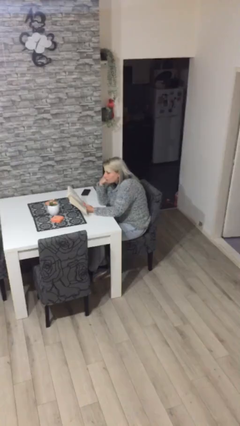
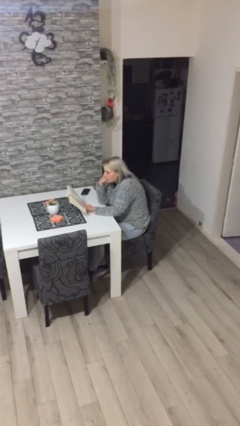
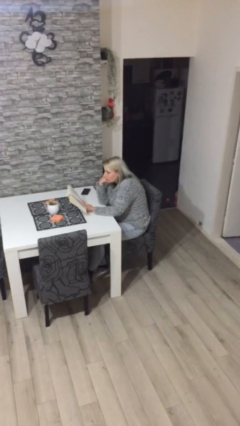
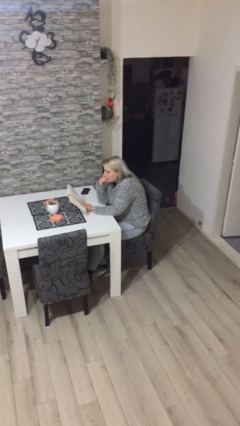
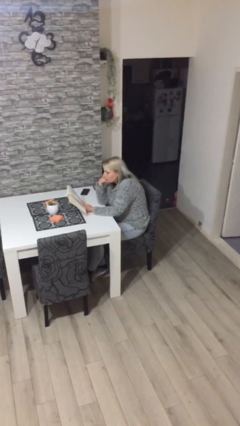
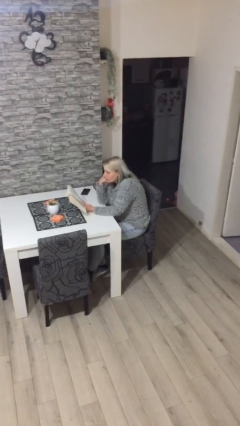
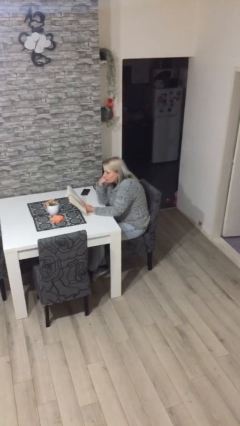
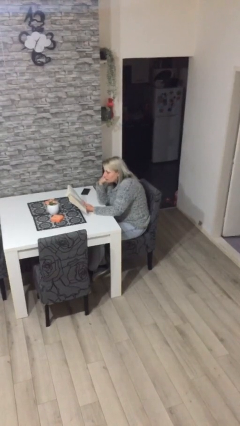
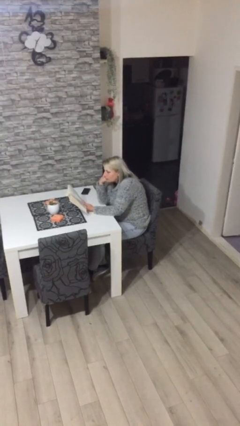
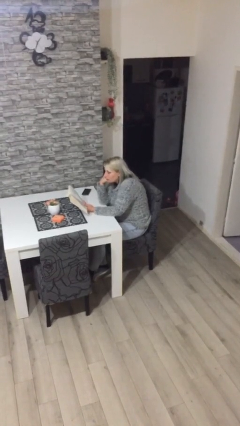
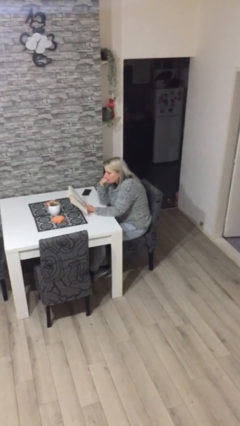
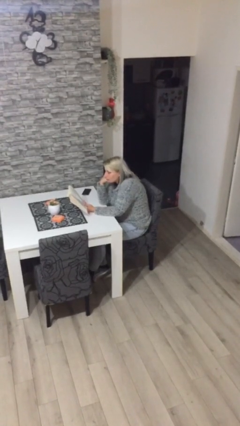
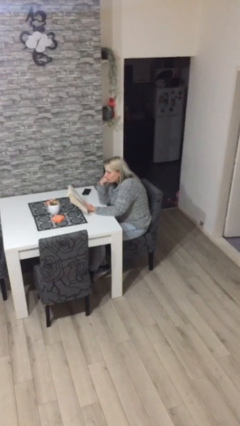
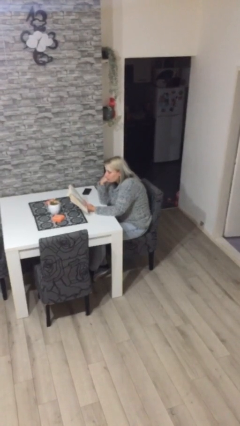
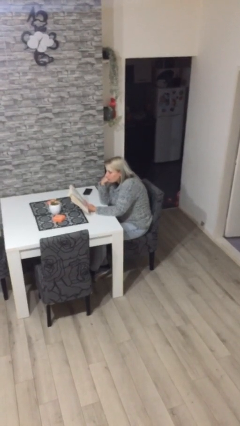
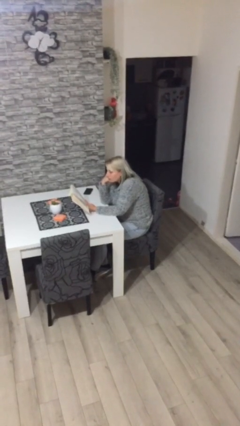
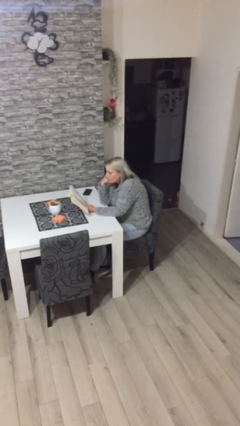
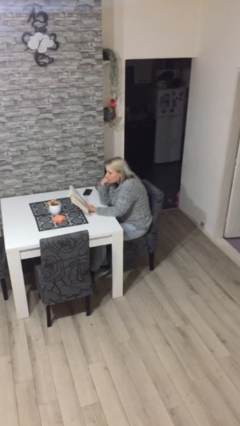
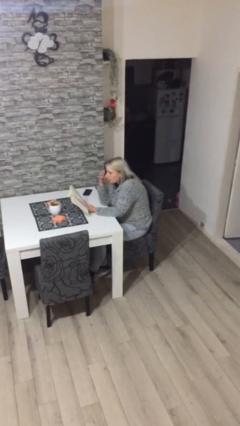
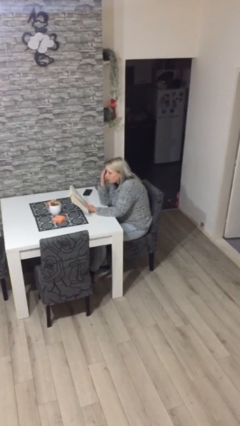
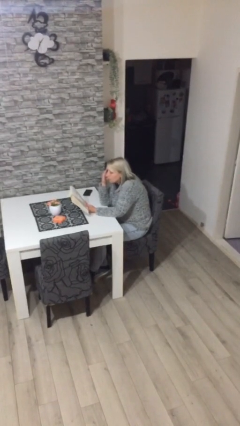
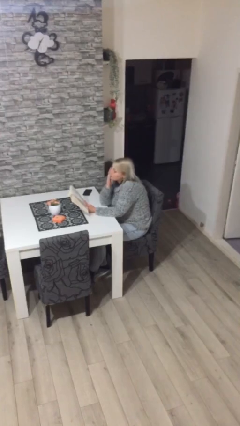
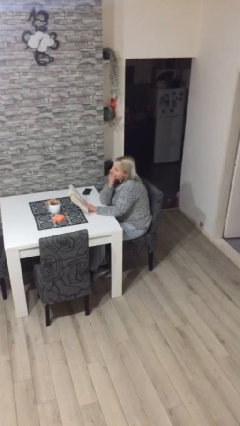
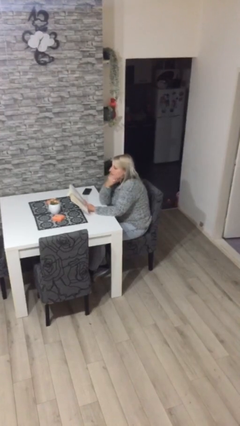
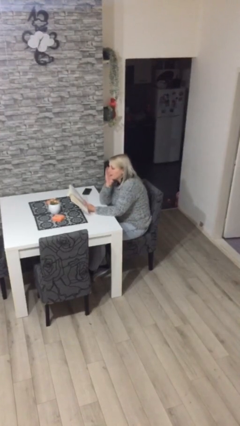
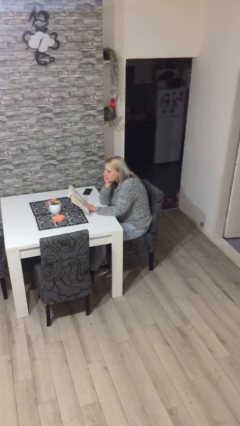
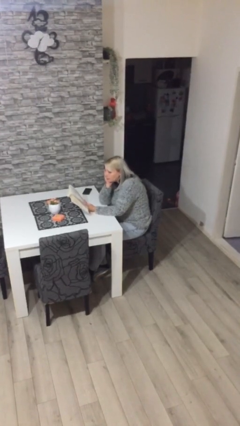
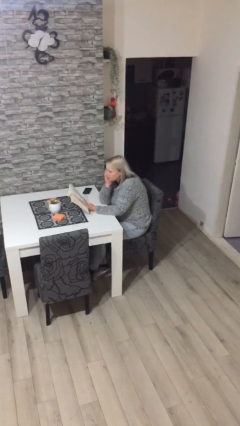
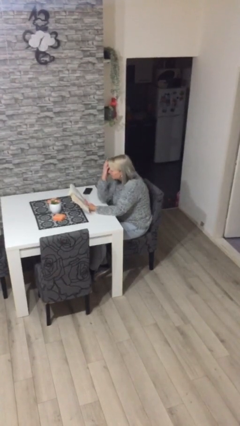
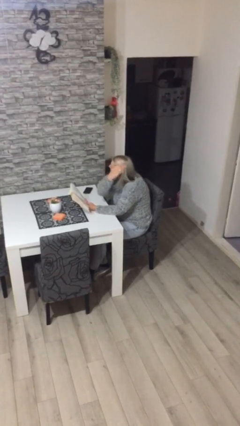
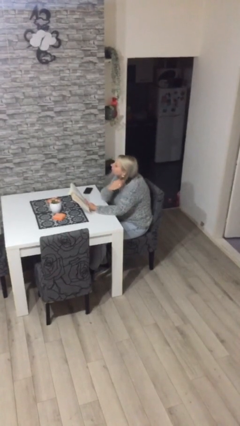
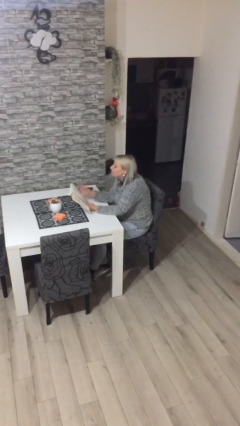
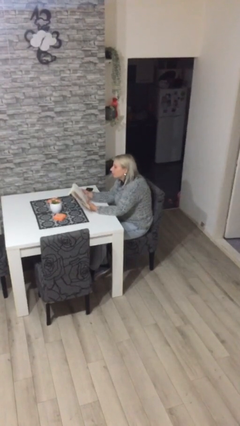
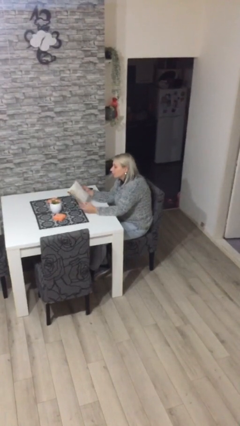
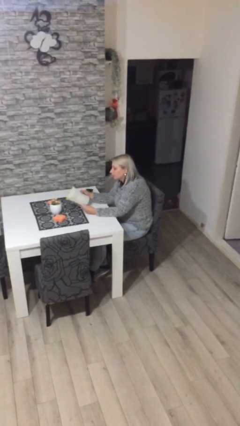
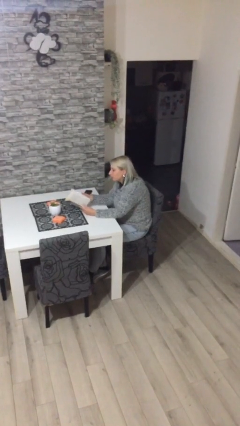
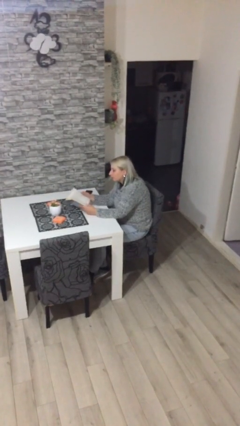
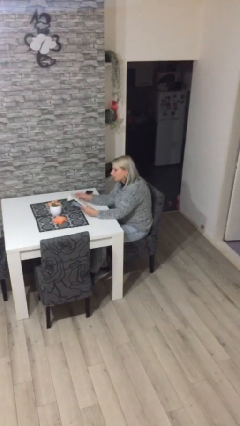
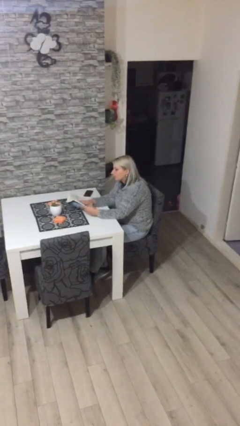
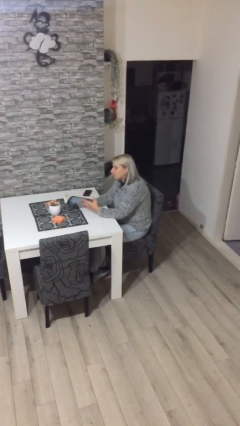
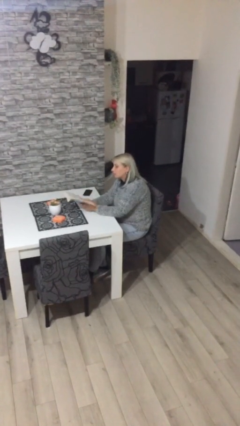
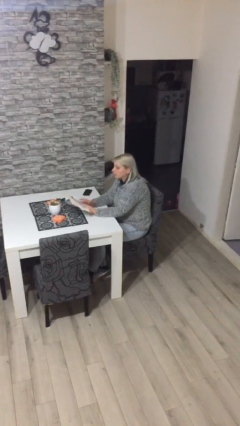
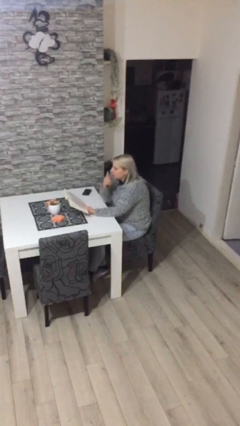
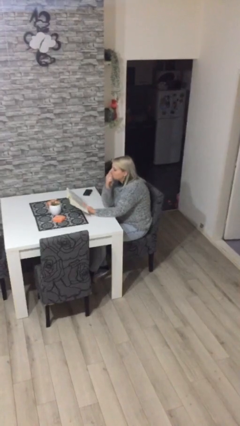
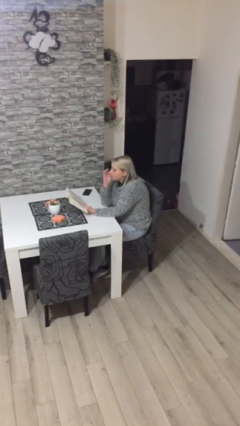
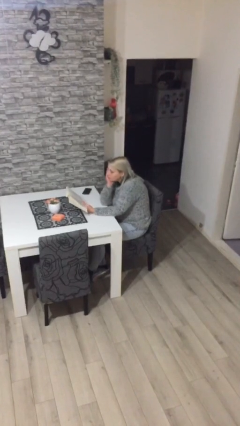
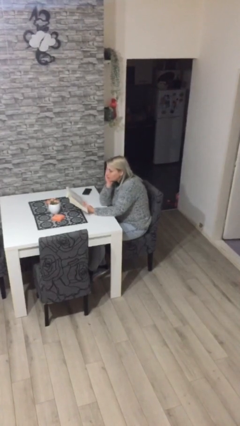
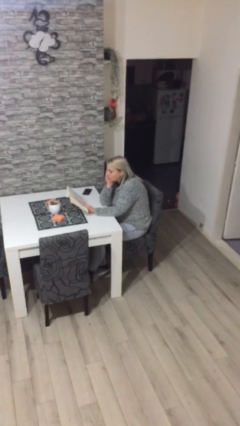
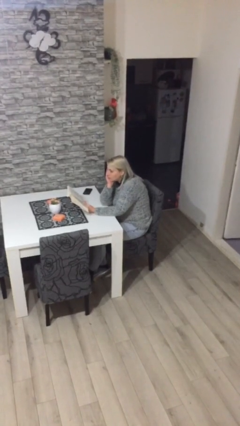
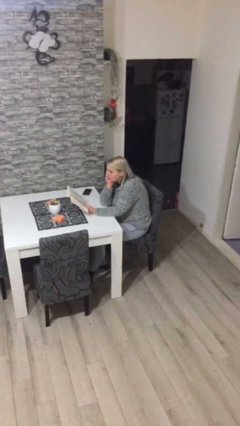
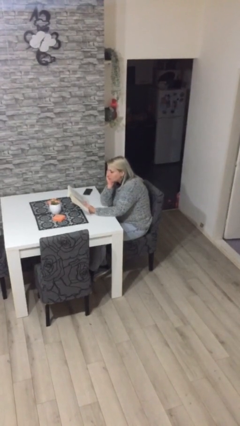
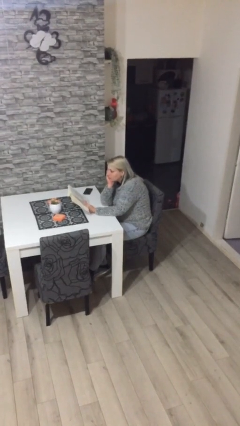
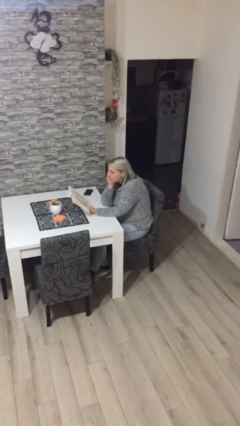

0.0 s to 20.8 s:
person reads document

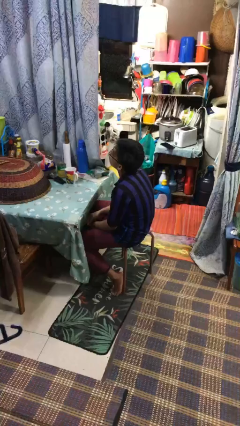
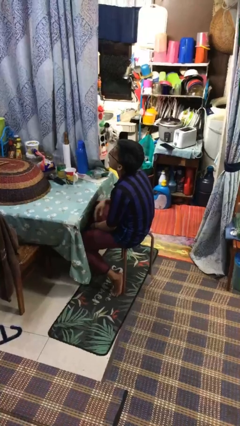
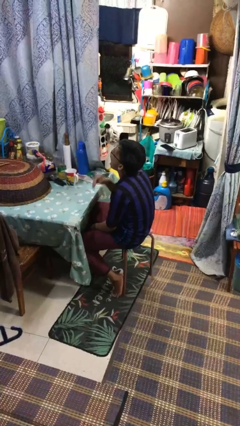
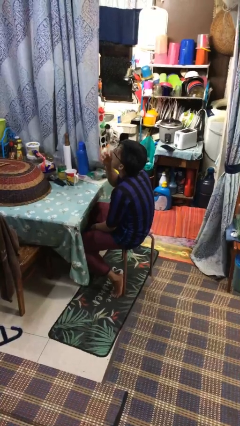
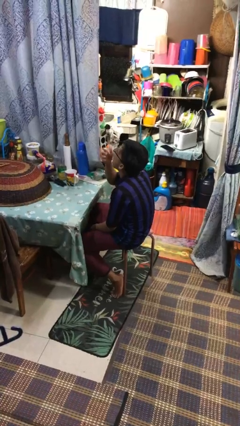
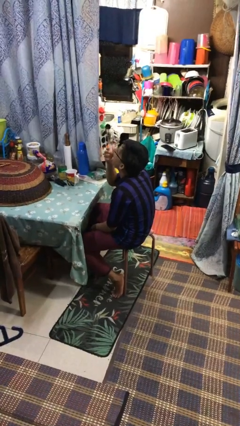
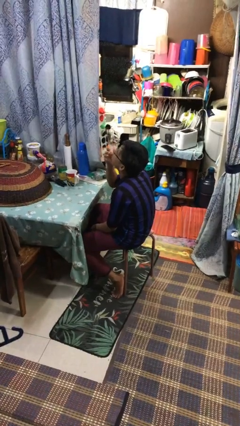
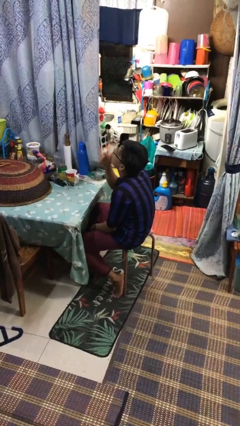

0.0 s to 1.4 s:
person yawns

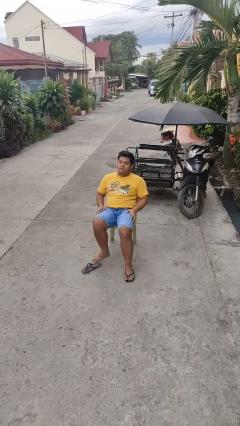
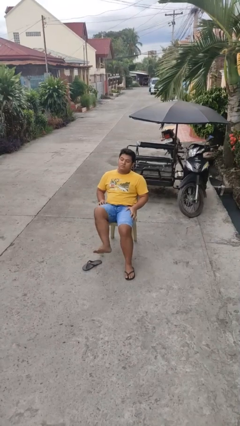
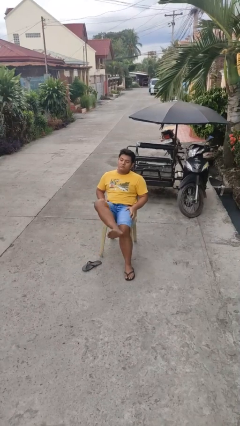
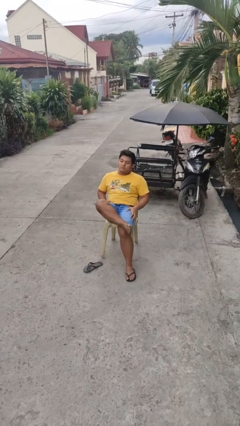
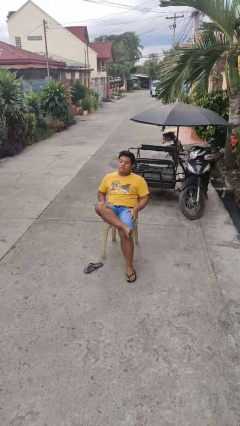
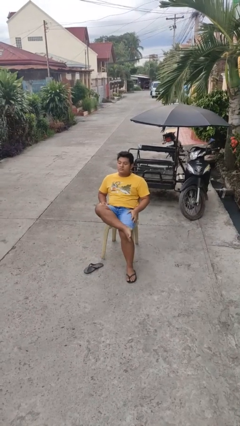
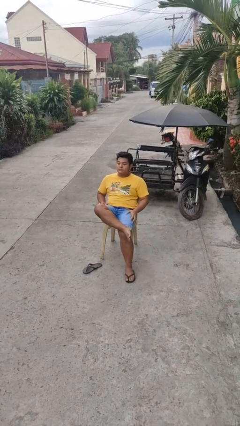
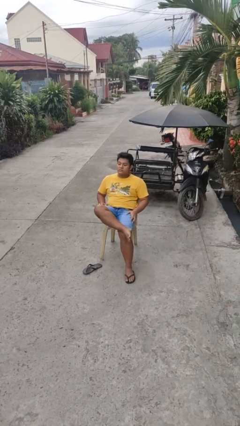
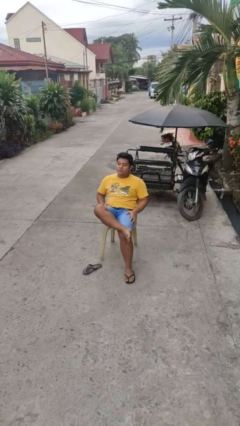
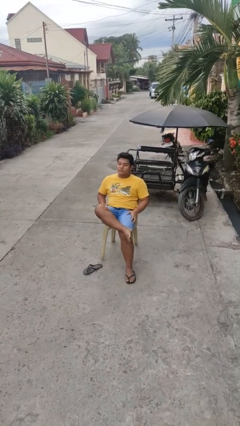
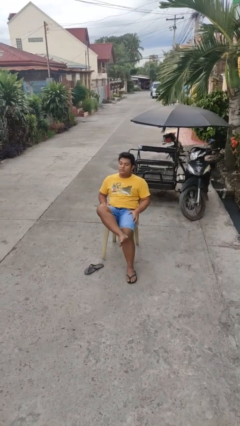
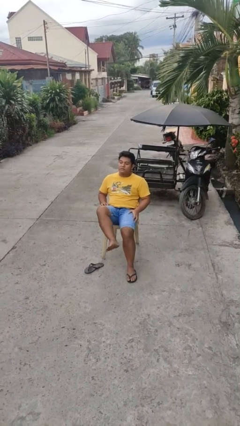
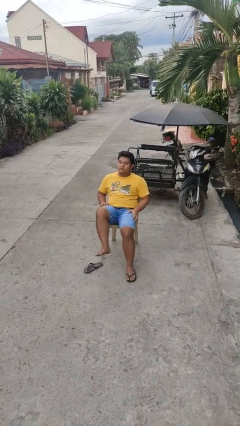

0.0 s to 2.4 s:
person crosses legs

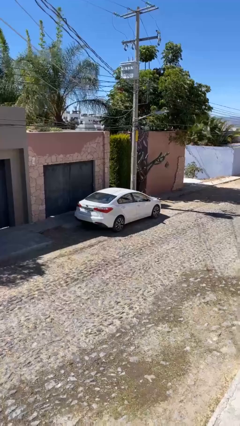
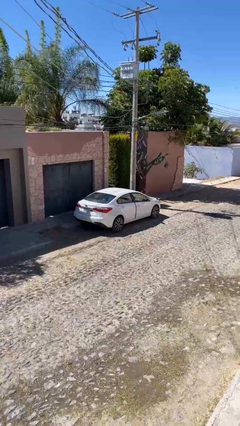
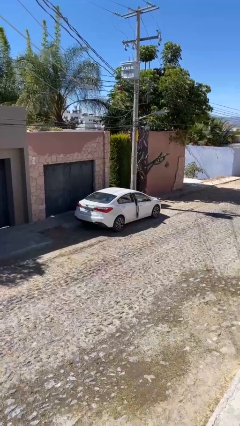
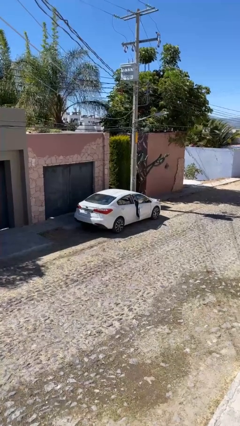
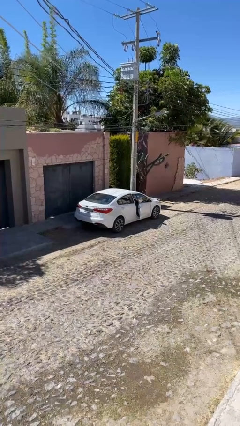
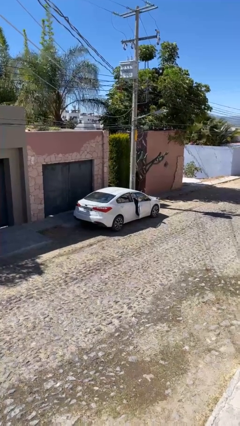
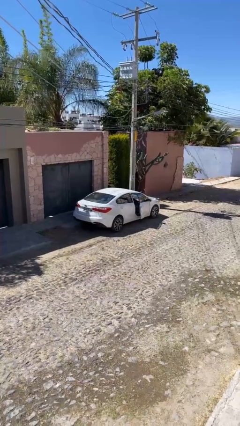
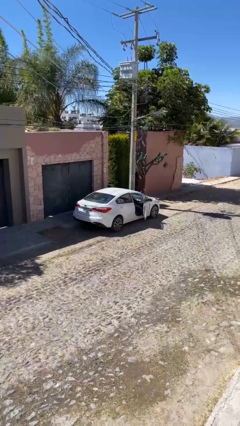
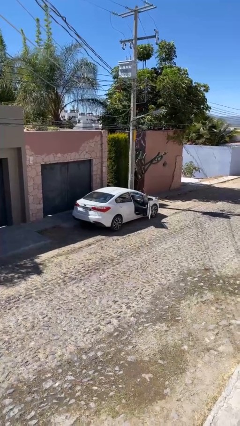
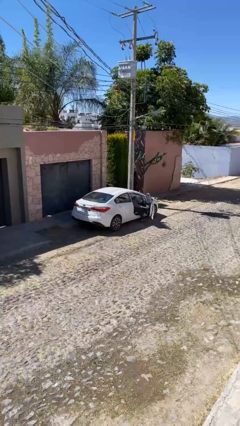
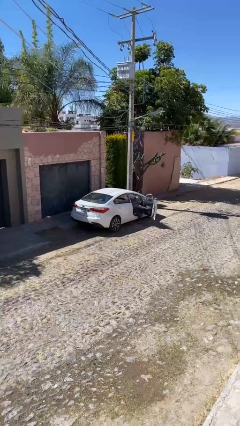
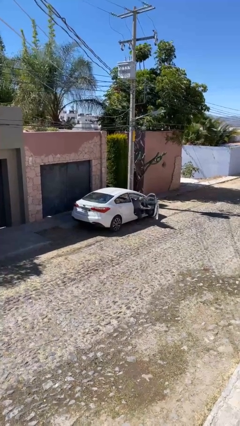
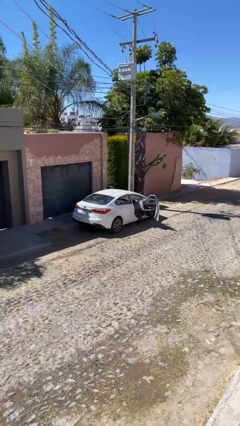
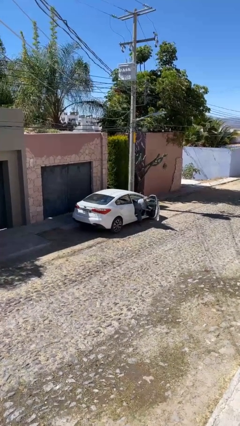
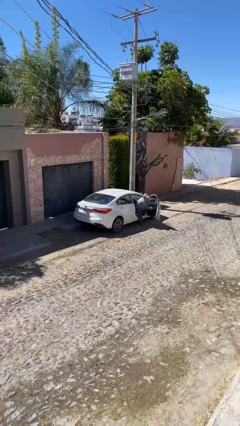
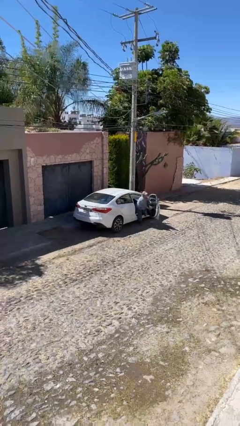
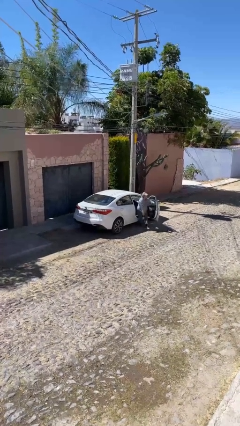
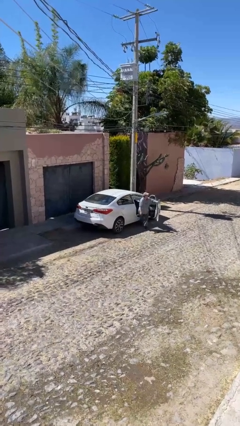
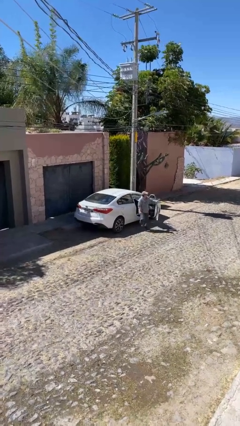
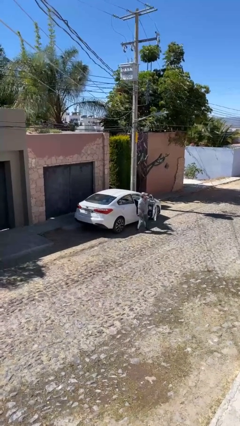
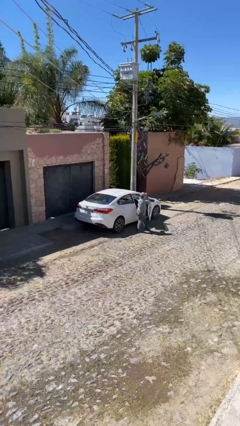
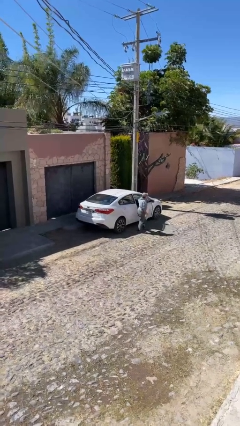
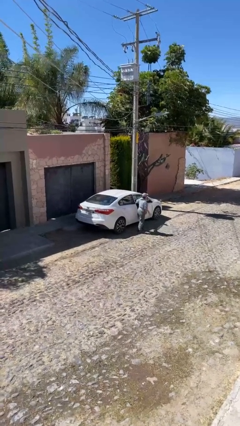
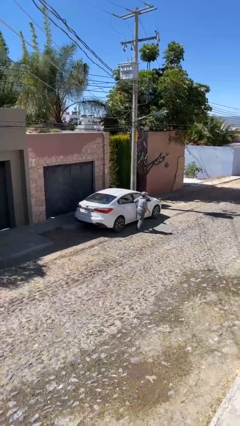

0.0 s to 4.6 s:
car drops off person
